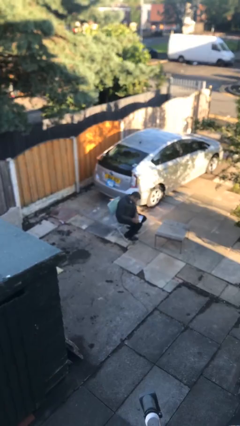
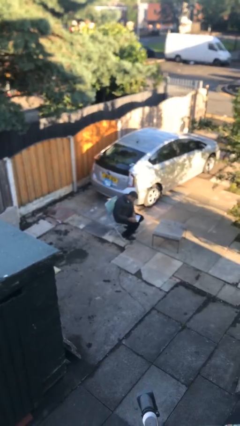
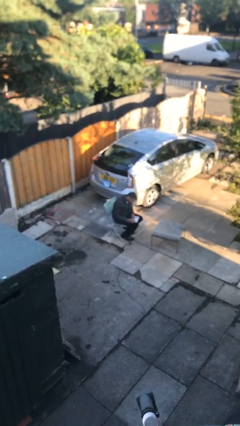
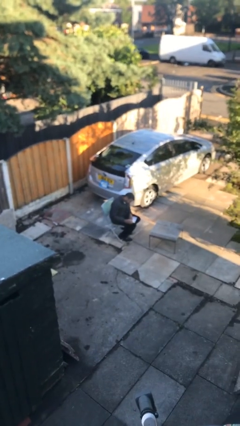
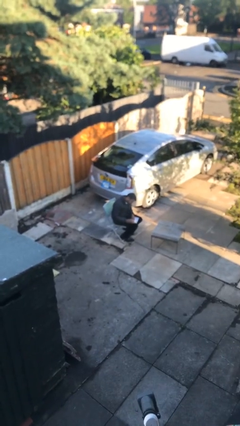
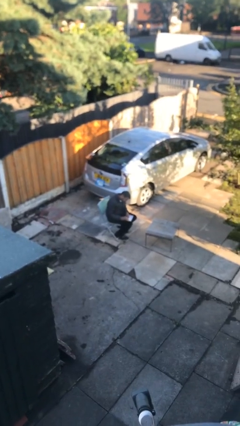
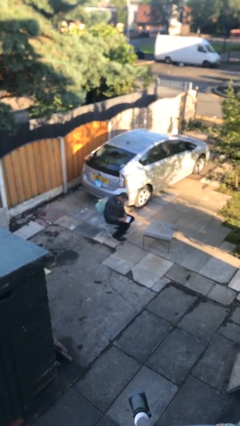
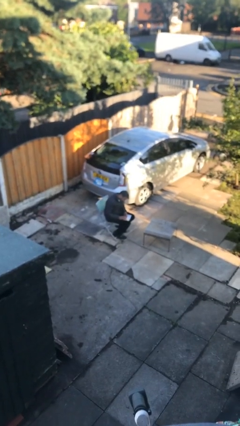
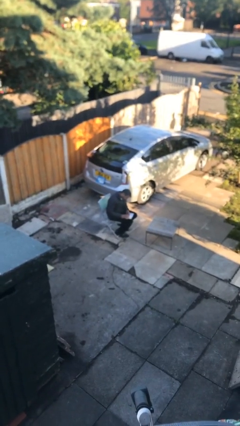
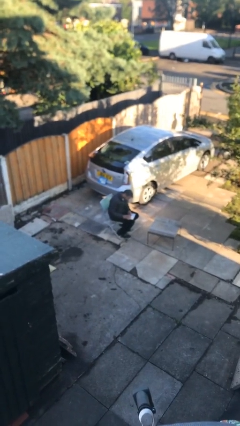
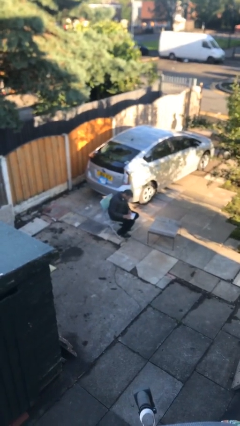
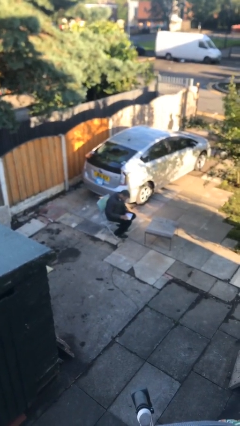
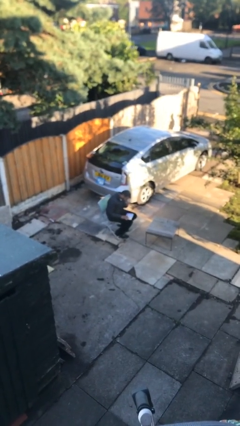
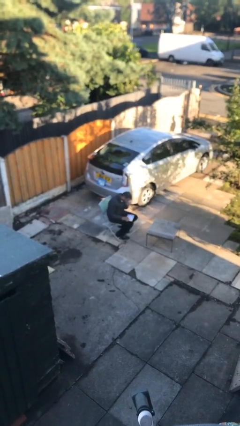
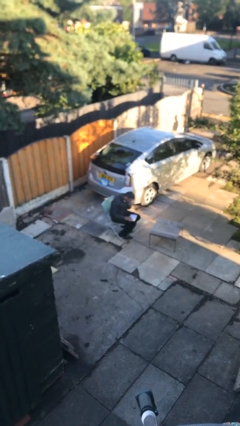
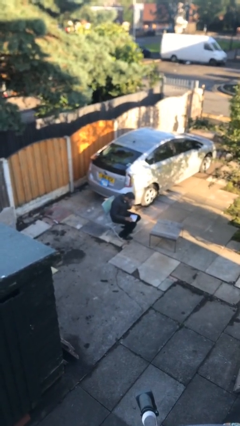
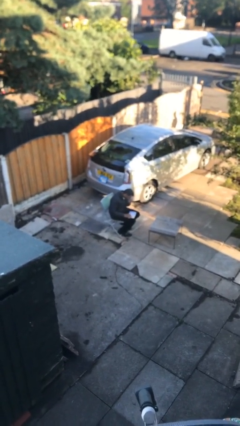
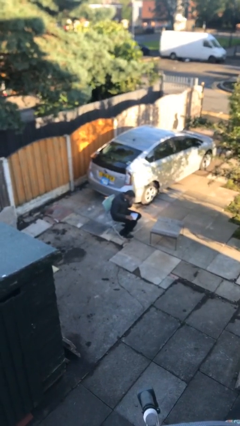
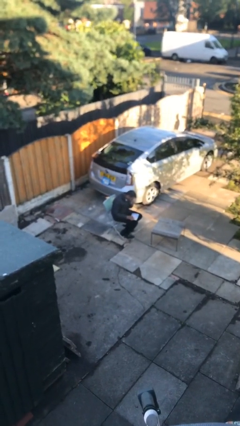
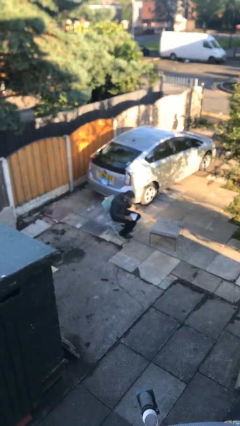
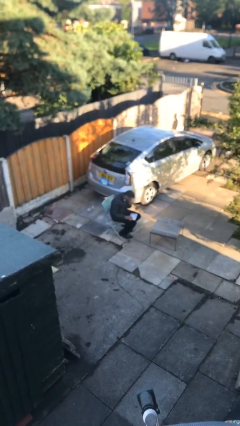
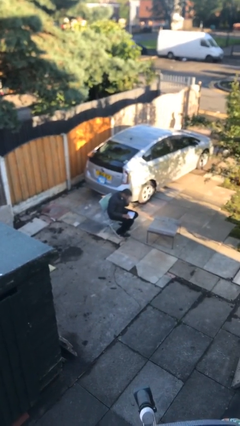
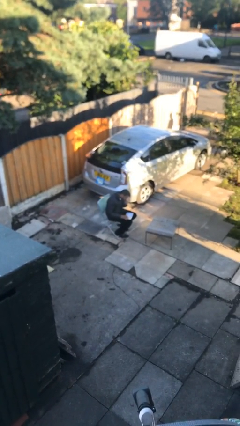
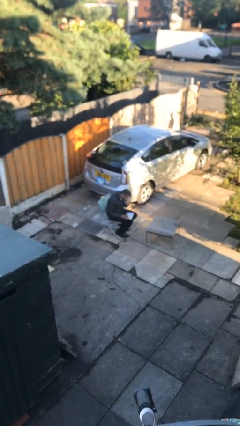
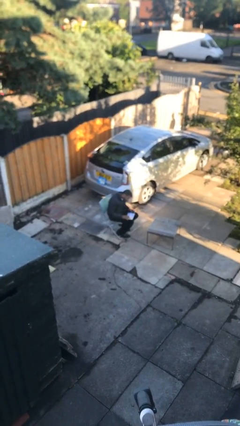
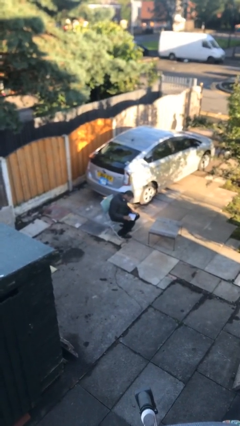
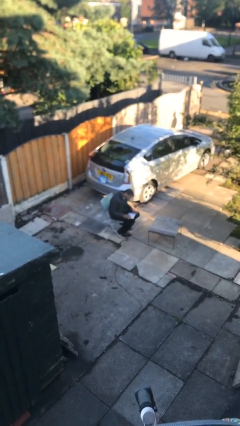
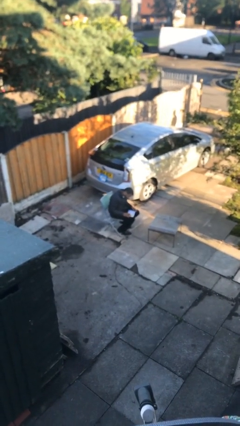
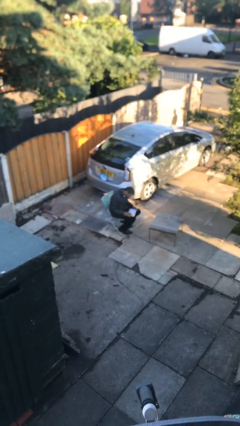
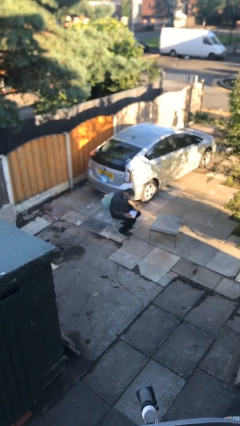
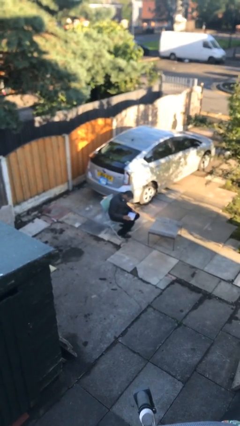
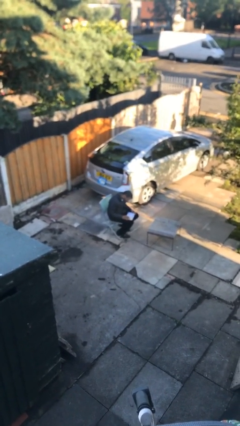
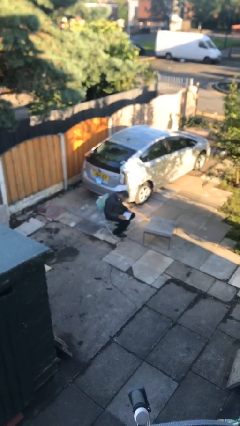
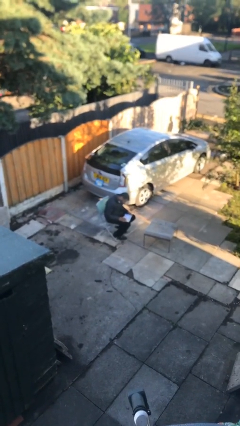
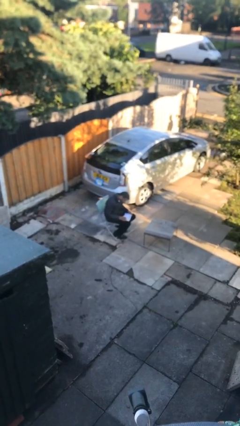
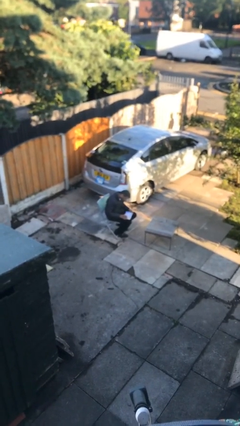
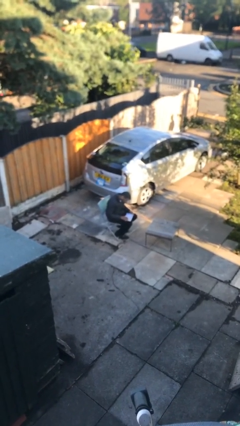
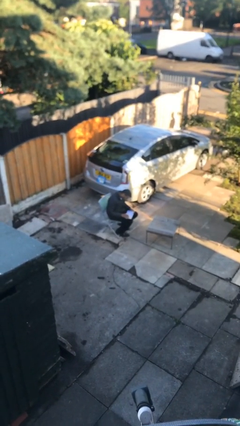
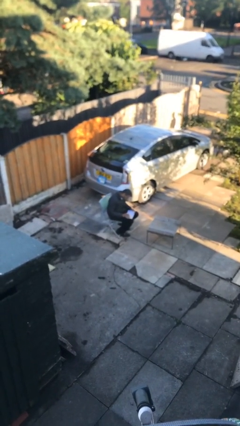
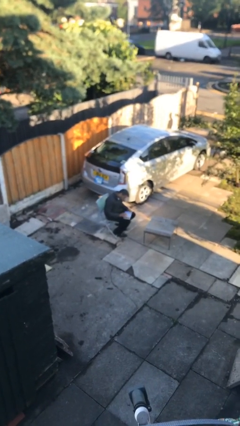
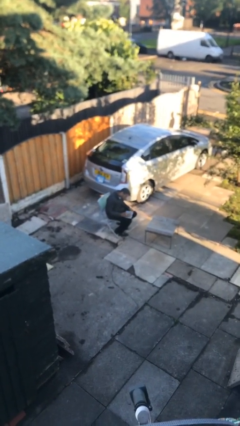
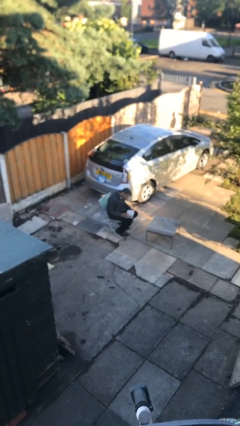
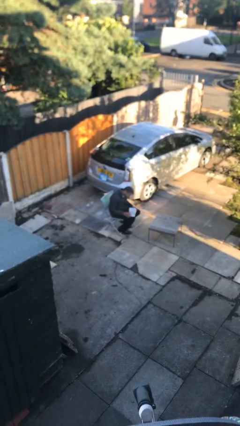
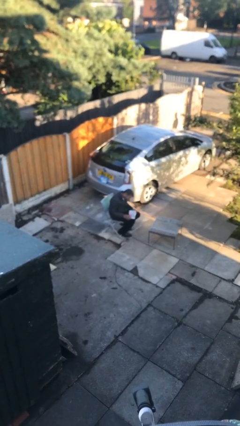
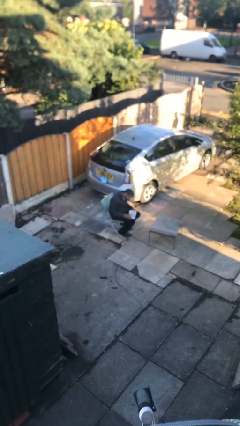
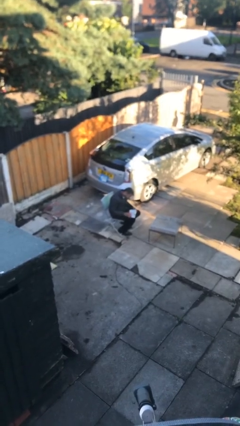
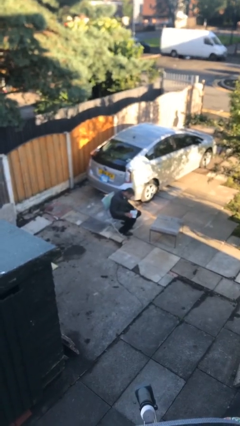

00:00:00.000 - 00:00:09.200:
person reads document

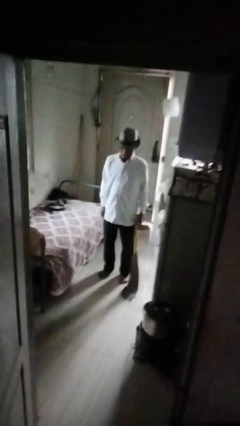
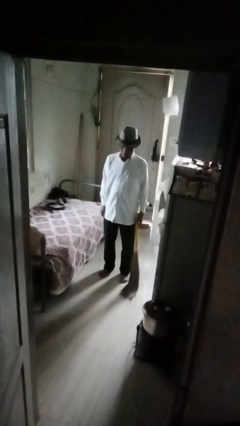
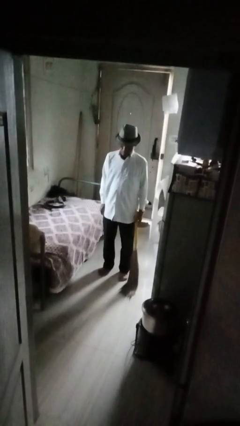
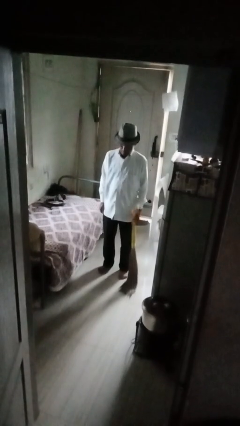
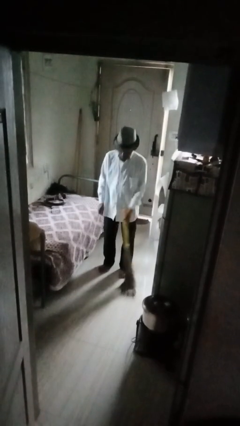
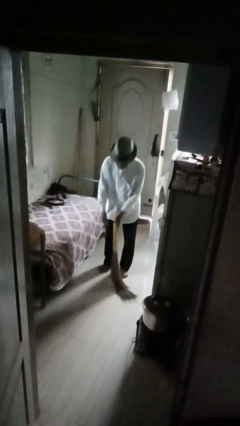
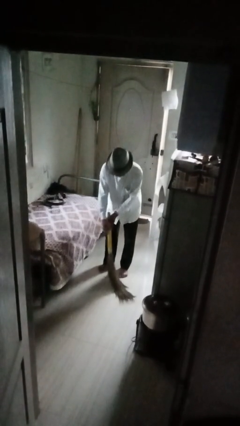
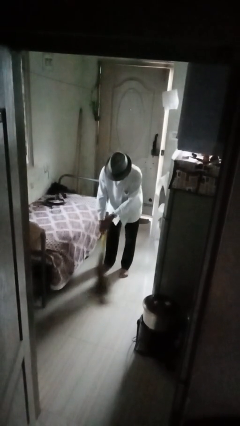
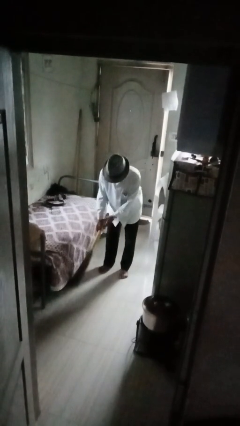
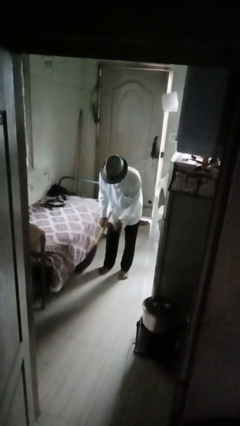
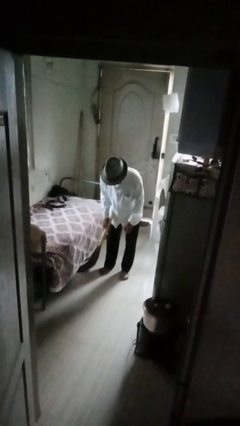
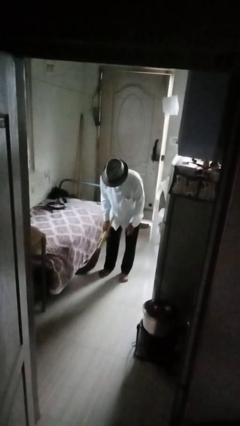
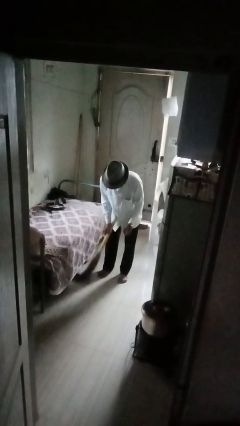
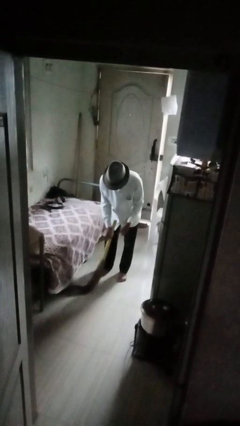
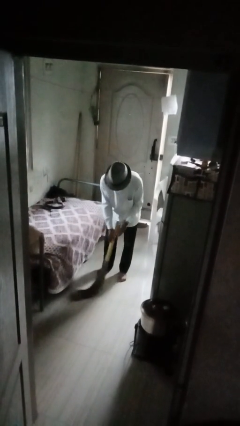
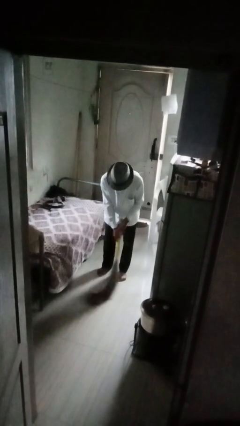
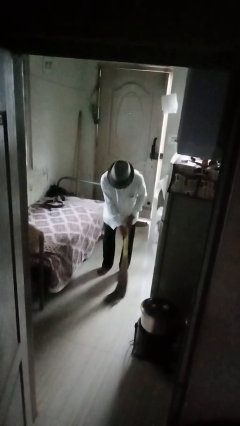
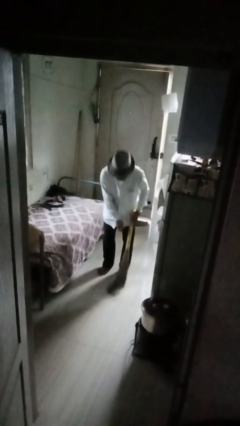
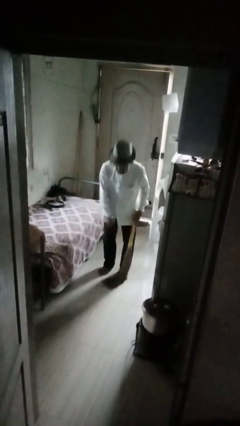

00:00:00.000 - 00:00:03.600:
person sweeps floor

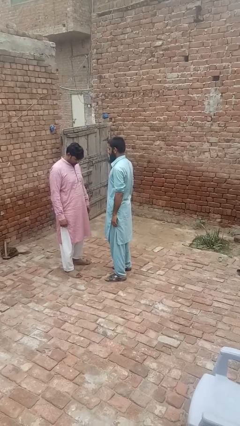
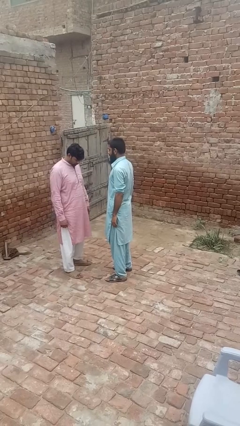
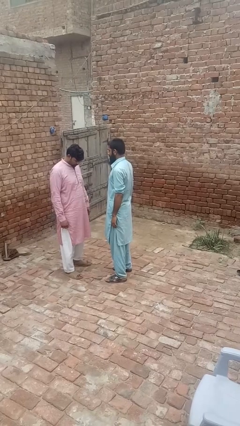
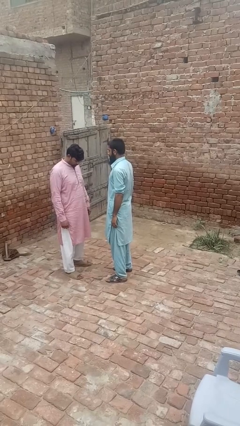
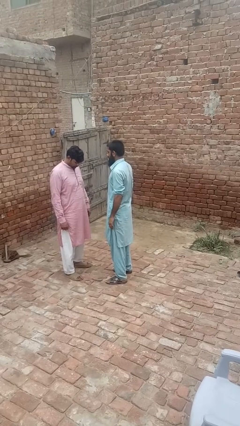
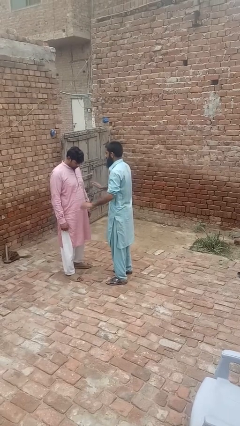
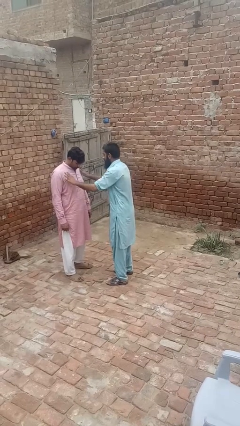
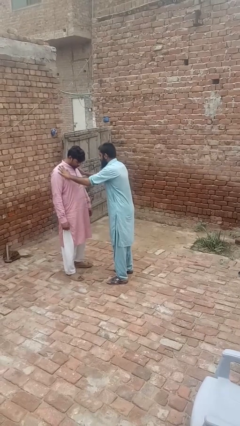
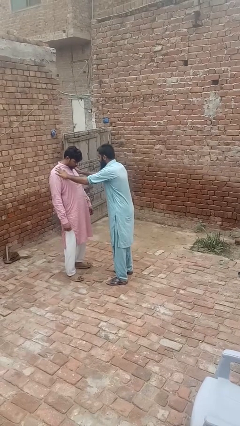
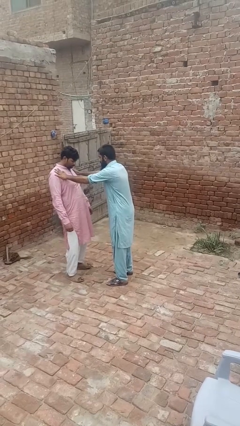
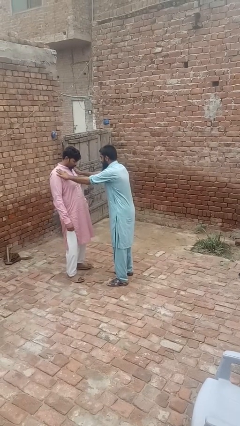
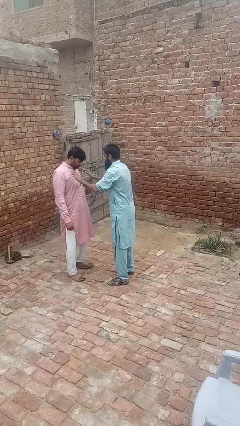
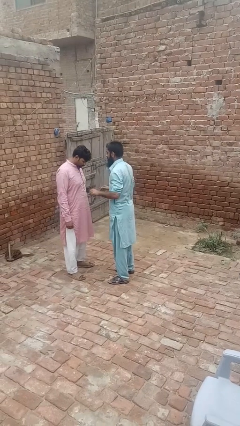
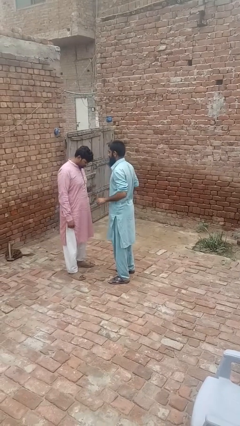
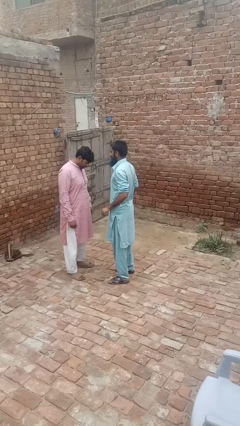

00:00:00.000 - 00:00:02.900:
person shoves person

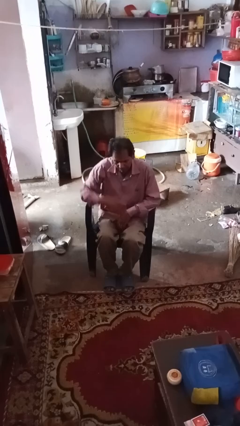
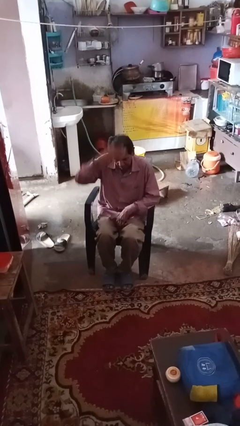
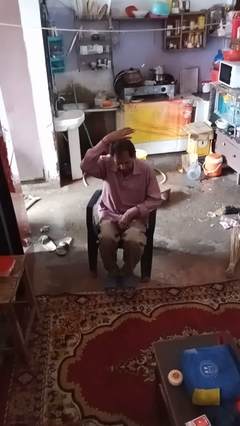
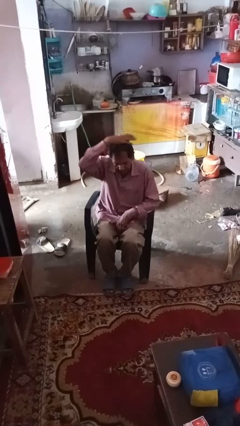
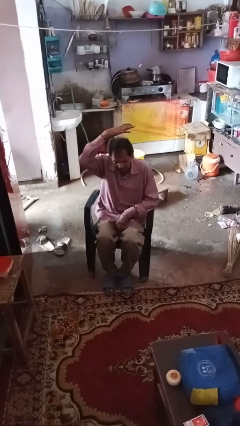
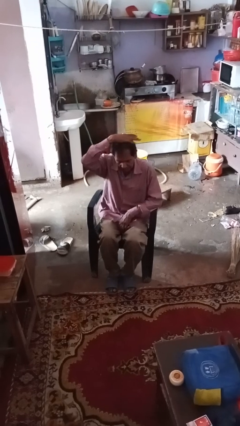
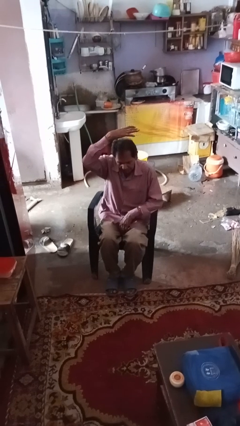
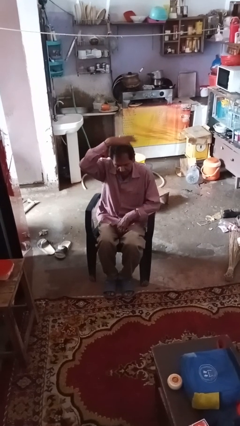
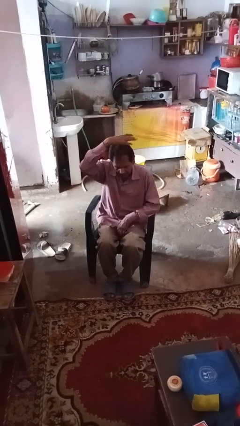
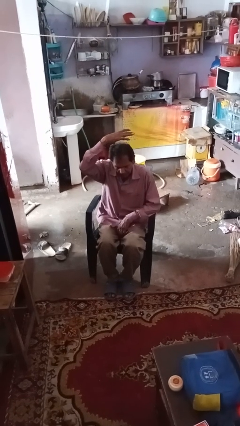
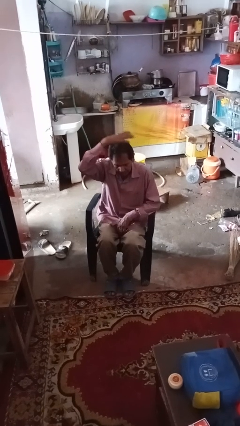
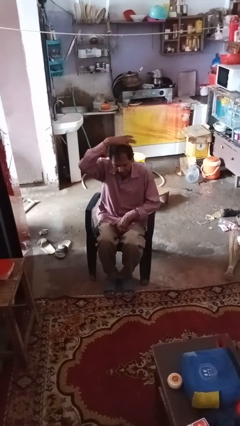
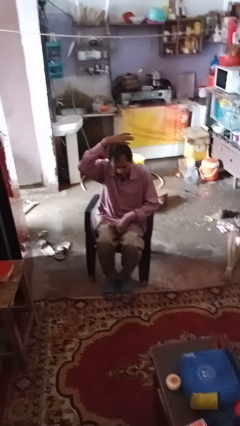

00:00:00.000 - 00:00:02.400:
person pats head
